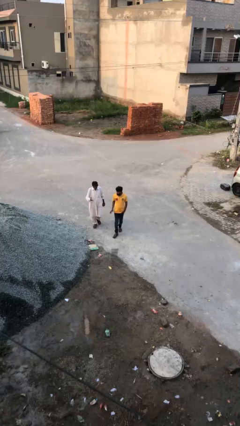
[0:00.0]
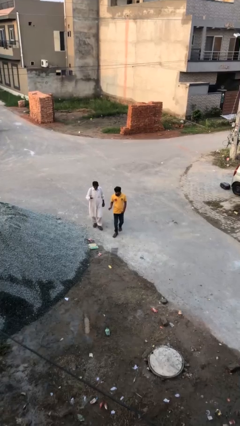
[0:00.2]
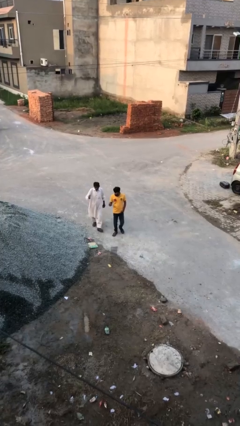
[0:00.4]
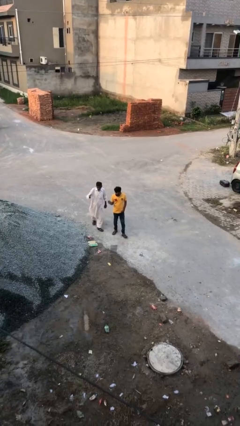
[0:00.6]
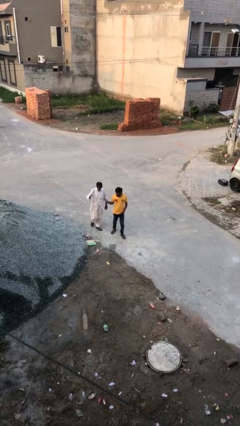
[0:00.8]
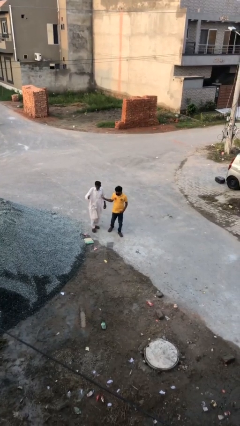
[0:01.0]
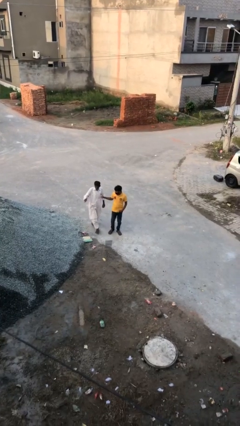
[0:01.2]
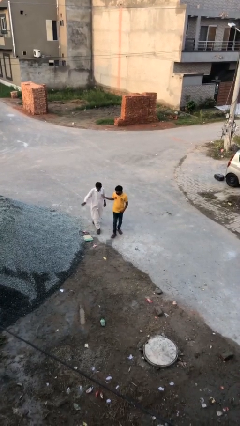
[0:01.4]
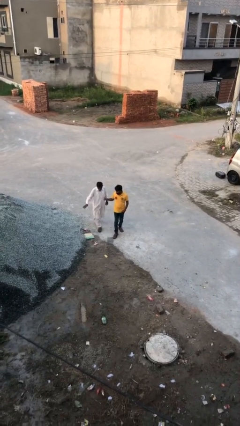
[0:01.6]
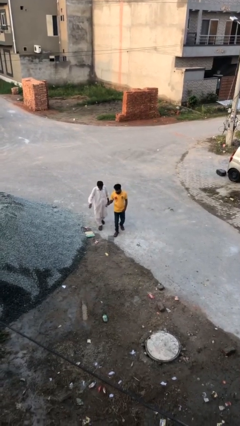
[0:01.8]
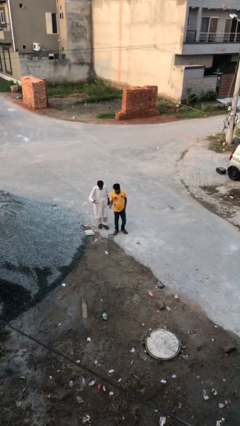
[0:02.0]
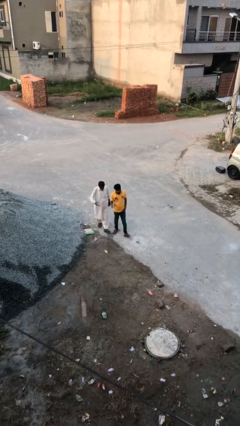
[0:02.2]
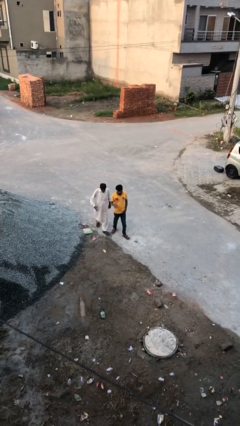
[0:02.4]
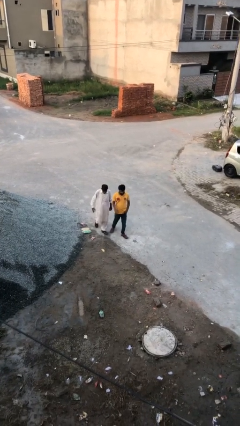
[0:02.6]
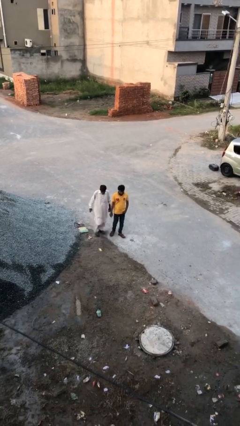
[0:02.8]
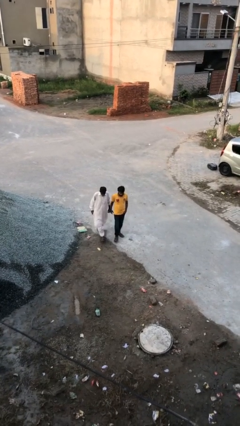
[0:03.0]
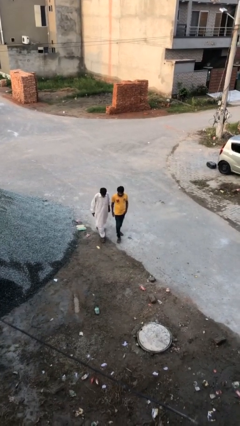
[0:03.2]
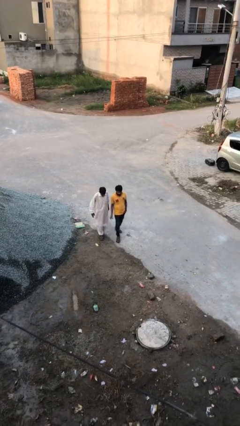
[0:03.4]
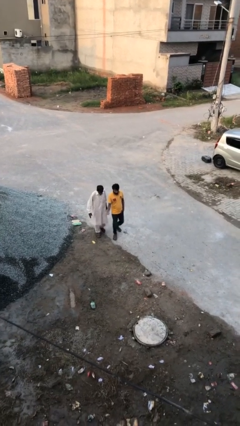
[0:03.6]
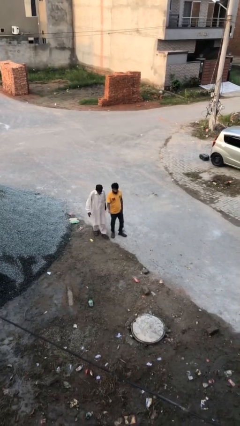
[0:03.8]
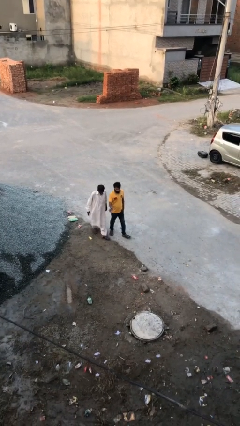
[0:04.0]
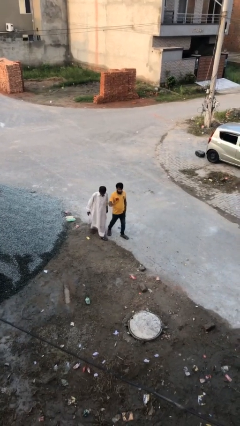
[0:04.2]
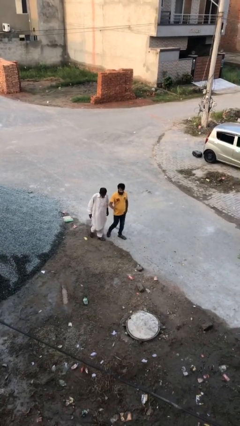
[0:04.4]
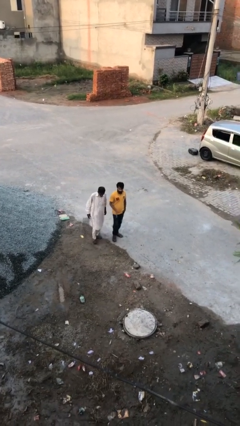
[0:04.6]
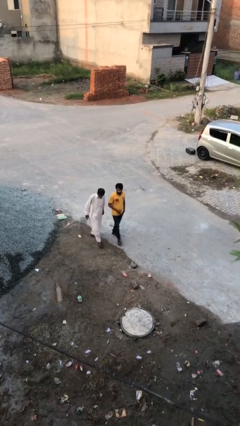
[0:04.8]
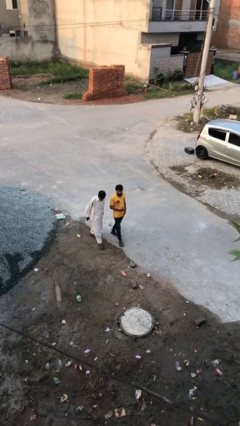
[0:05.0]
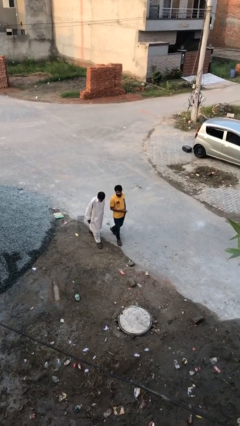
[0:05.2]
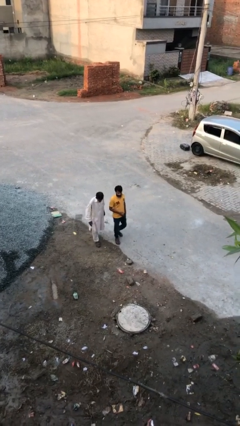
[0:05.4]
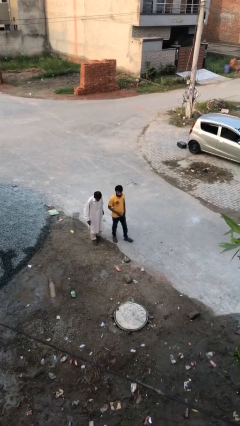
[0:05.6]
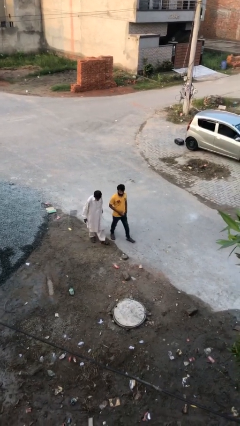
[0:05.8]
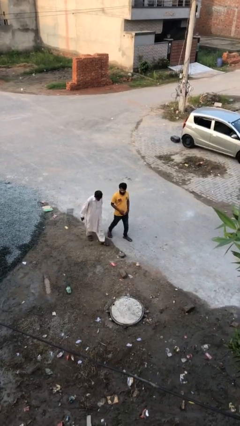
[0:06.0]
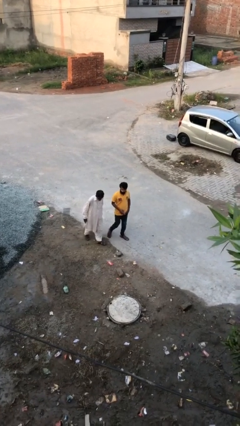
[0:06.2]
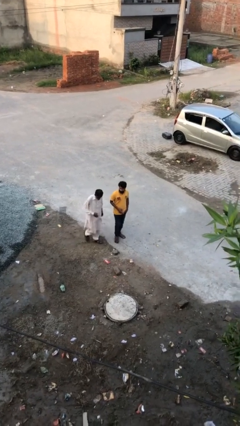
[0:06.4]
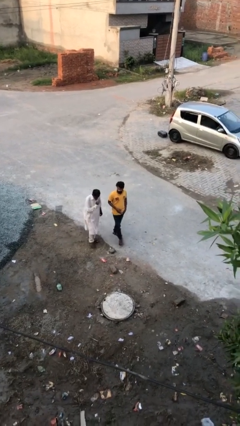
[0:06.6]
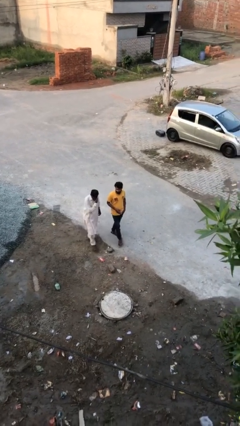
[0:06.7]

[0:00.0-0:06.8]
person talks to person

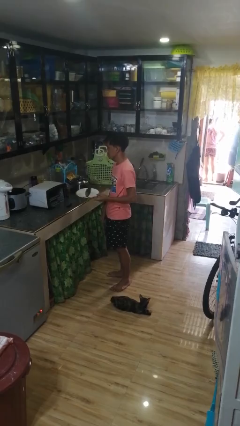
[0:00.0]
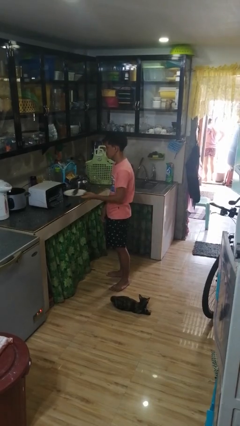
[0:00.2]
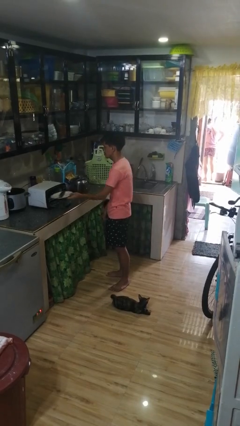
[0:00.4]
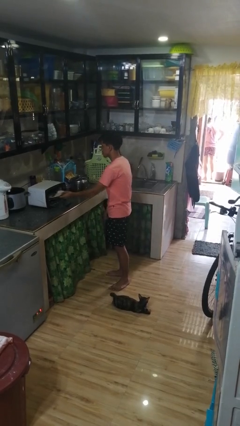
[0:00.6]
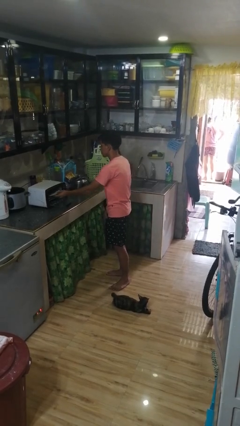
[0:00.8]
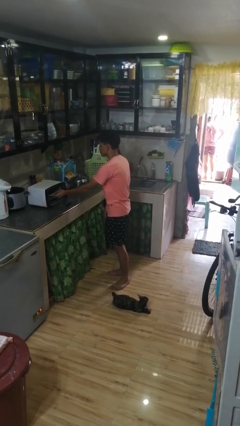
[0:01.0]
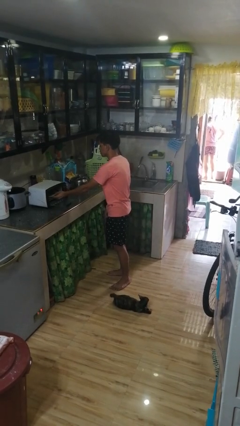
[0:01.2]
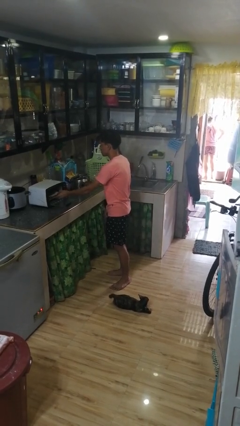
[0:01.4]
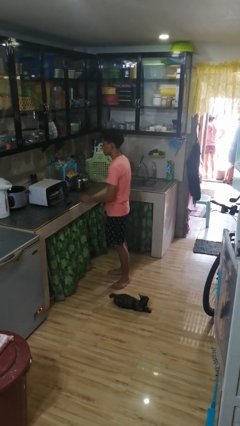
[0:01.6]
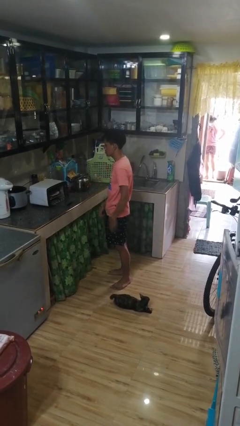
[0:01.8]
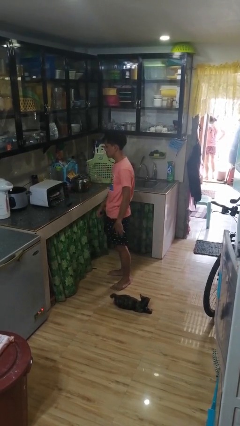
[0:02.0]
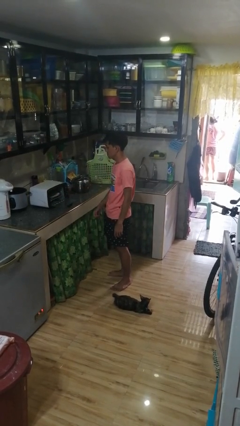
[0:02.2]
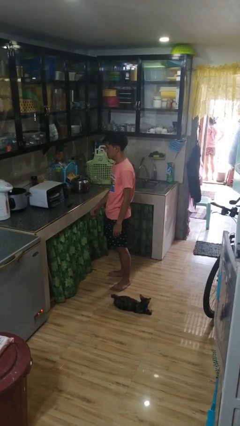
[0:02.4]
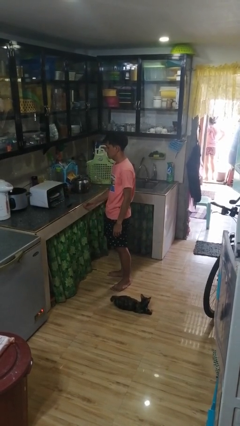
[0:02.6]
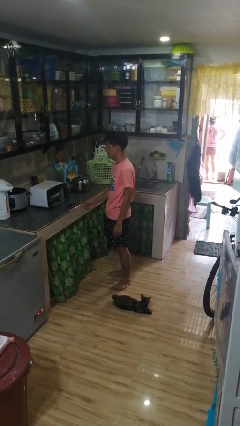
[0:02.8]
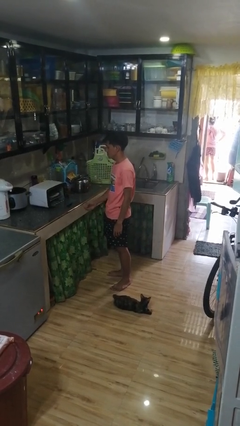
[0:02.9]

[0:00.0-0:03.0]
person puts object into microwave

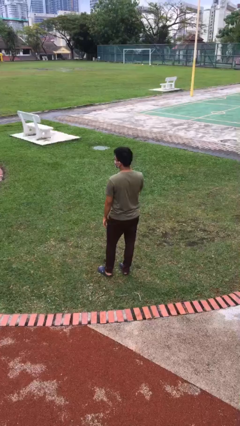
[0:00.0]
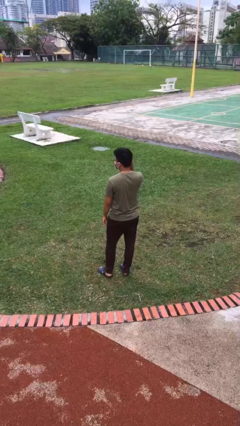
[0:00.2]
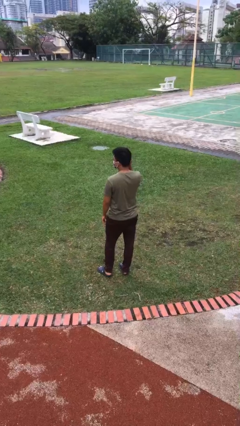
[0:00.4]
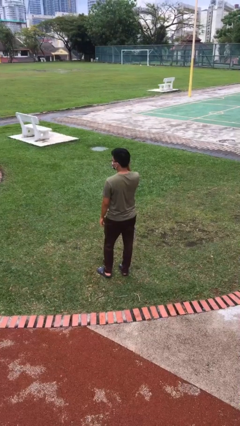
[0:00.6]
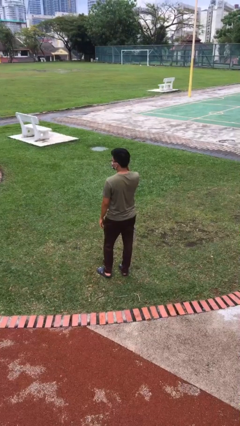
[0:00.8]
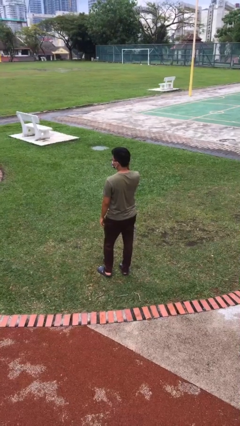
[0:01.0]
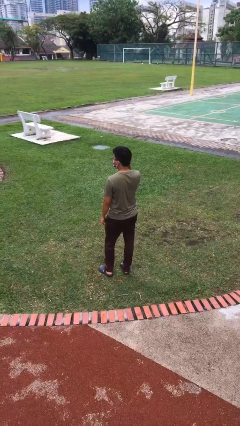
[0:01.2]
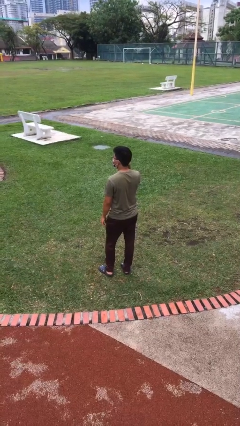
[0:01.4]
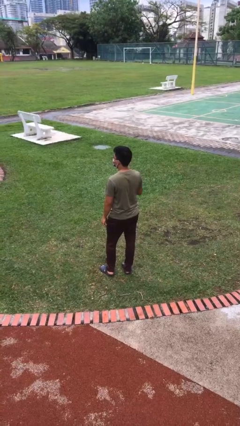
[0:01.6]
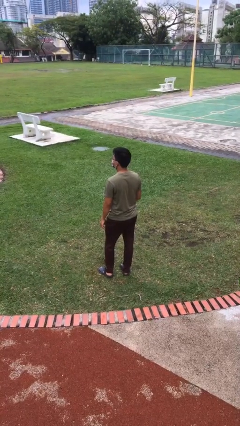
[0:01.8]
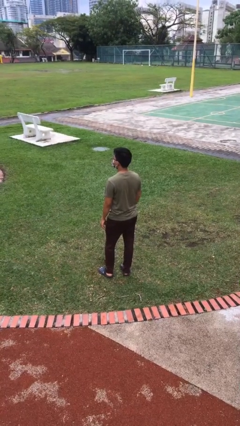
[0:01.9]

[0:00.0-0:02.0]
person touches earlobe

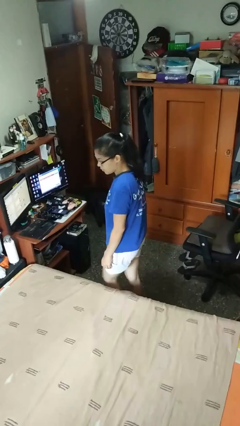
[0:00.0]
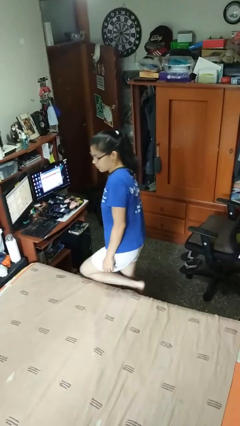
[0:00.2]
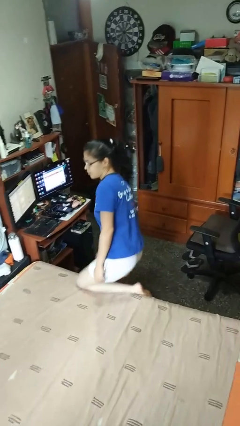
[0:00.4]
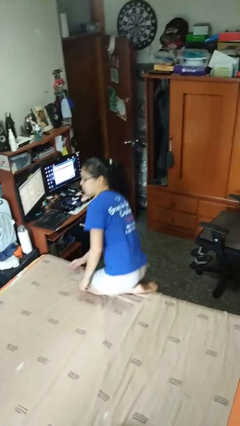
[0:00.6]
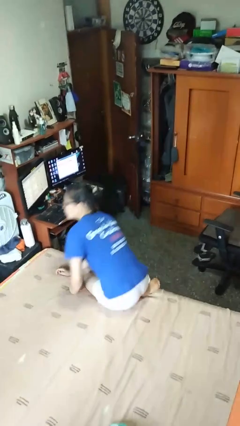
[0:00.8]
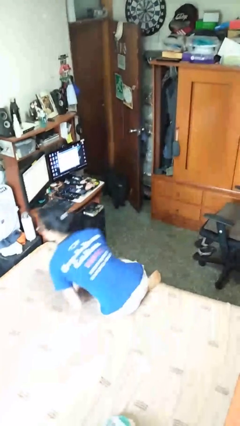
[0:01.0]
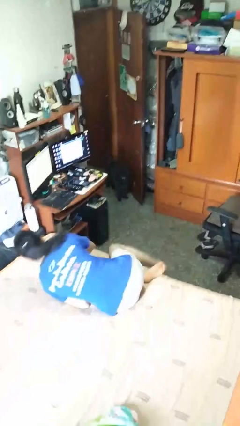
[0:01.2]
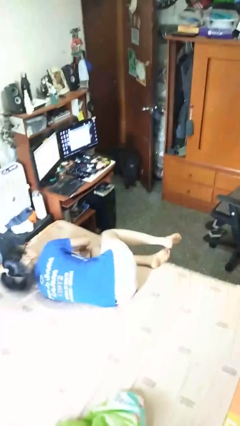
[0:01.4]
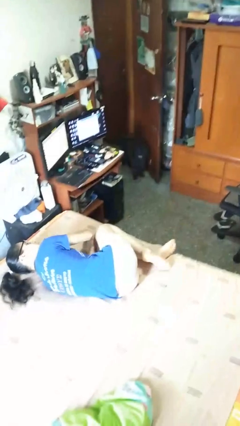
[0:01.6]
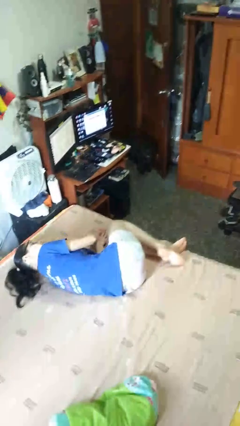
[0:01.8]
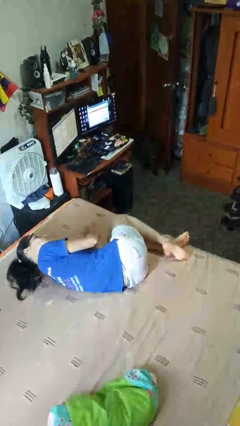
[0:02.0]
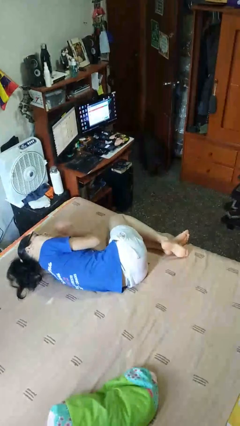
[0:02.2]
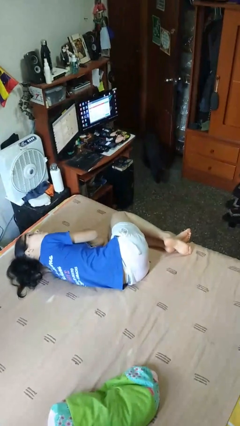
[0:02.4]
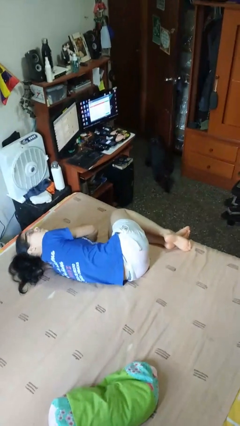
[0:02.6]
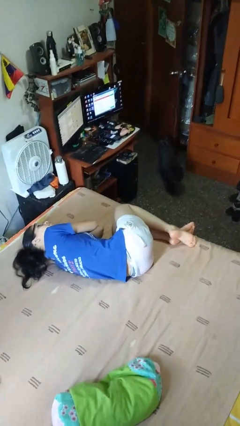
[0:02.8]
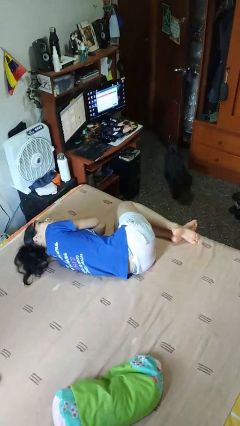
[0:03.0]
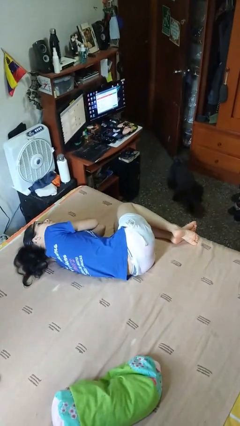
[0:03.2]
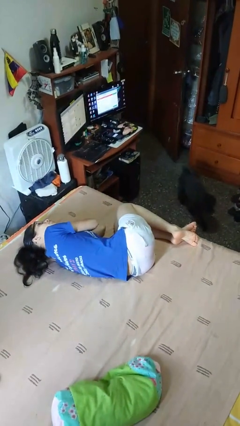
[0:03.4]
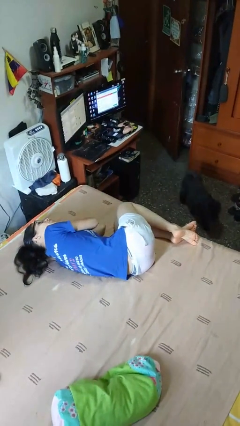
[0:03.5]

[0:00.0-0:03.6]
person lies down on bed

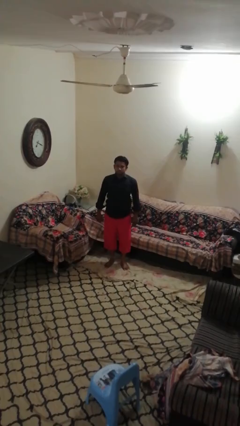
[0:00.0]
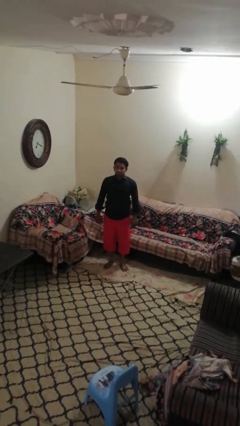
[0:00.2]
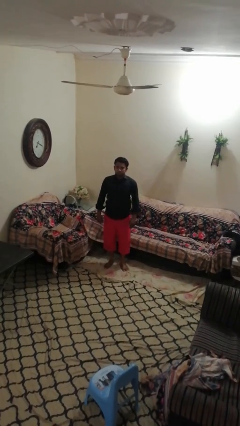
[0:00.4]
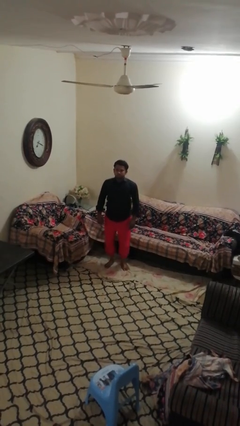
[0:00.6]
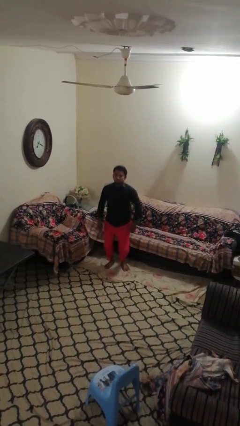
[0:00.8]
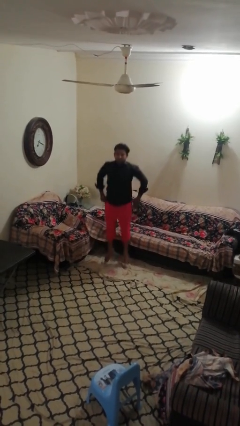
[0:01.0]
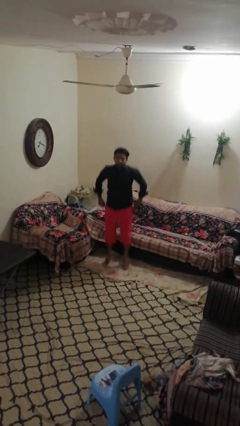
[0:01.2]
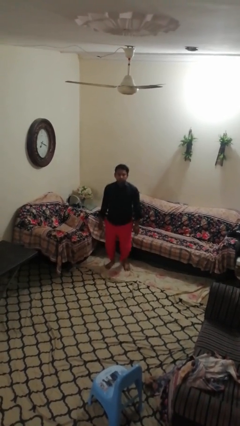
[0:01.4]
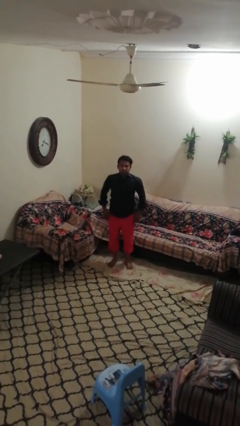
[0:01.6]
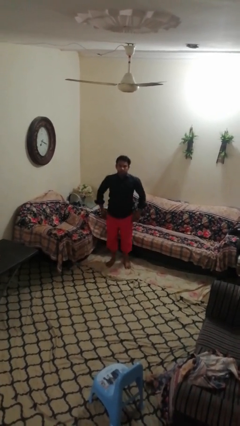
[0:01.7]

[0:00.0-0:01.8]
person jumps

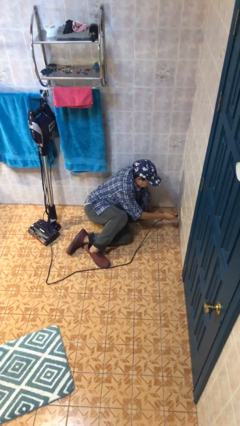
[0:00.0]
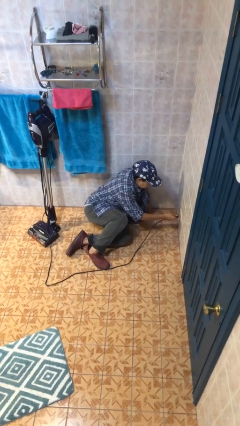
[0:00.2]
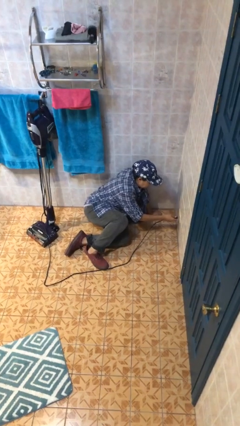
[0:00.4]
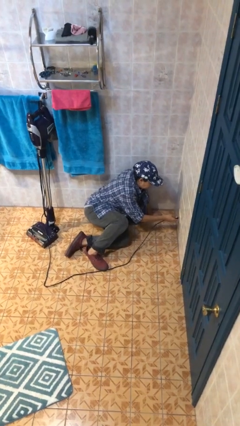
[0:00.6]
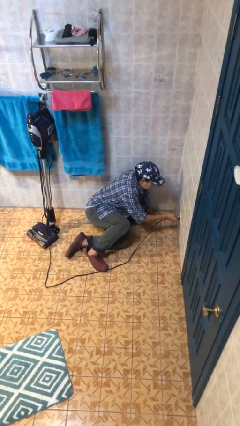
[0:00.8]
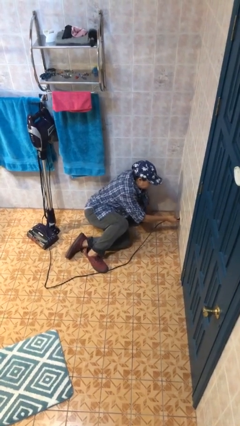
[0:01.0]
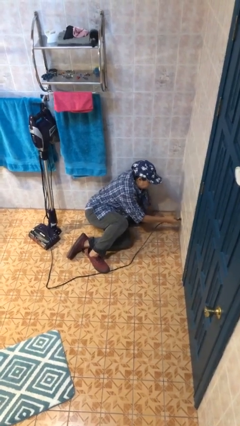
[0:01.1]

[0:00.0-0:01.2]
person plugs into electrical socket
